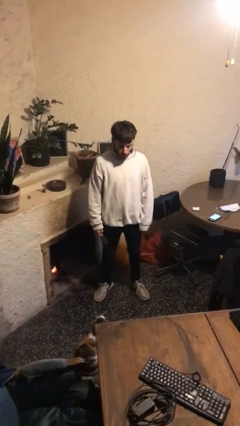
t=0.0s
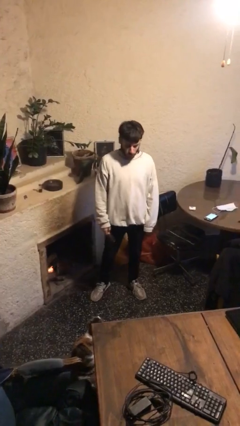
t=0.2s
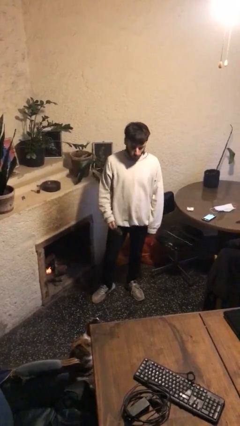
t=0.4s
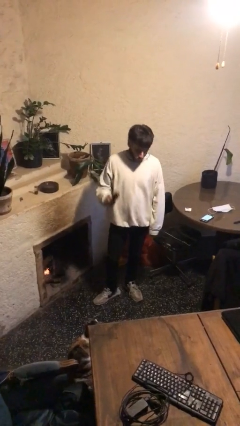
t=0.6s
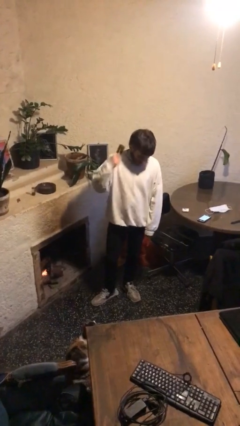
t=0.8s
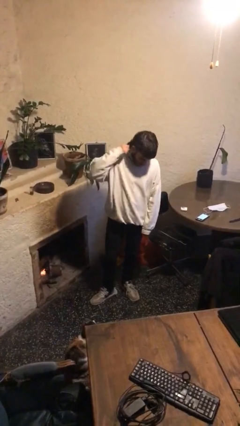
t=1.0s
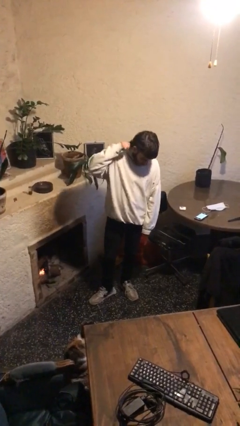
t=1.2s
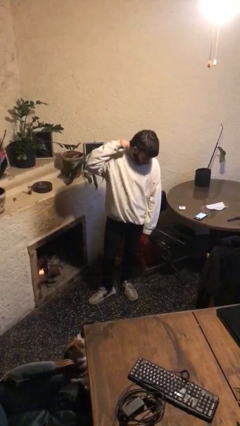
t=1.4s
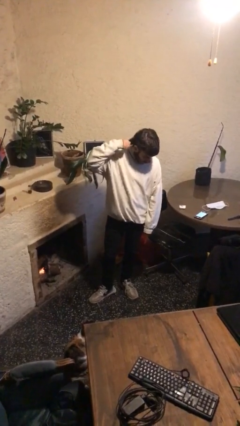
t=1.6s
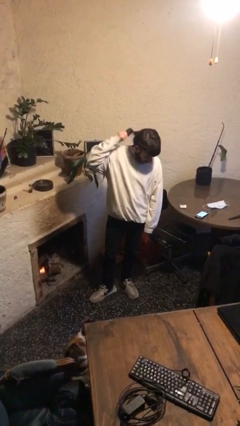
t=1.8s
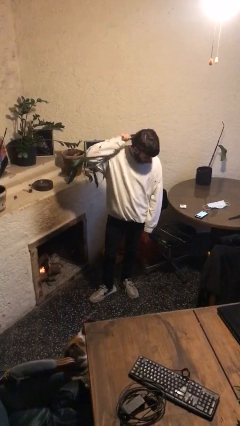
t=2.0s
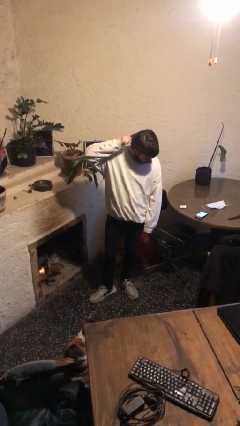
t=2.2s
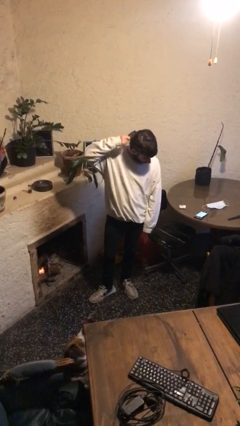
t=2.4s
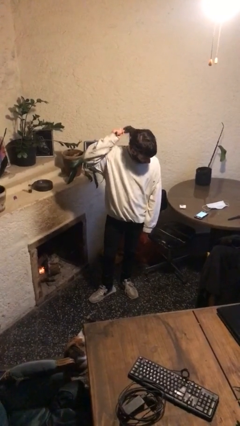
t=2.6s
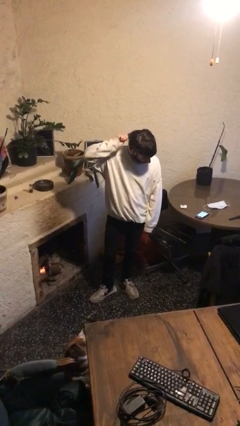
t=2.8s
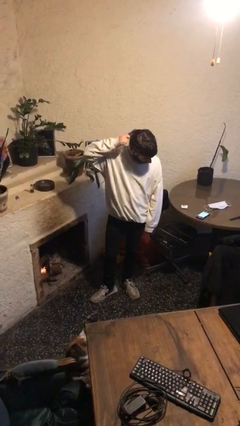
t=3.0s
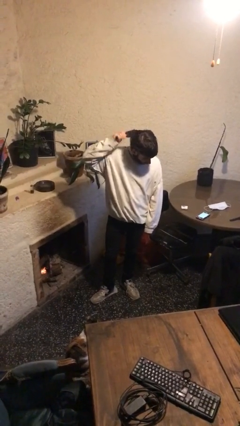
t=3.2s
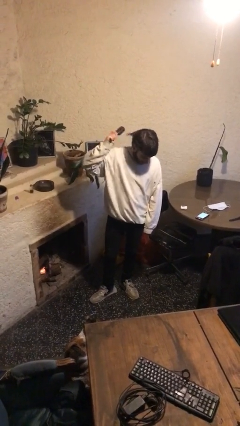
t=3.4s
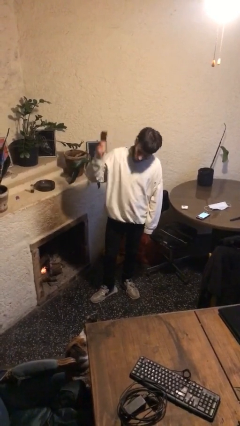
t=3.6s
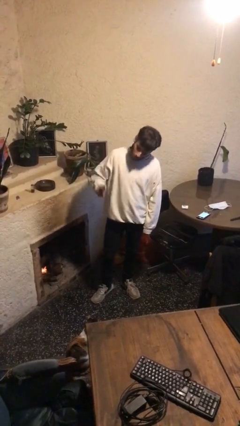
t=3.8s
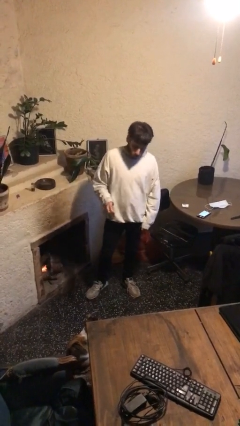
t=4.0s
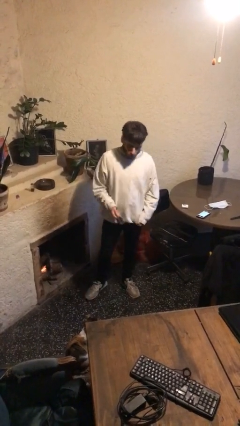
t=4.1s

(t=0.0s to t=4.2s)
person brushes hair

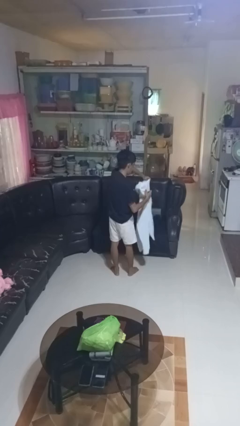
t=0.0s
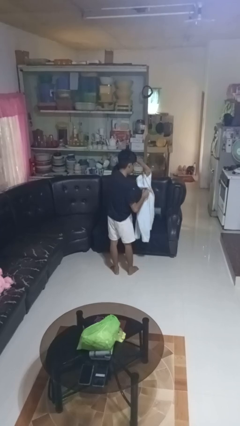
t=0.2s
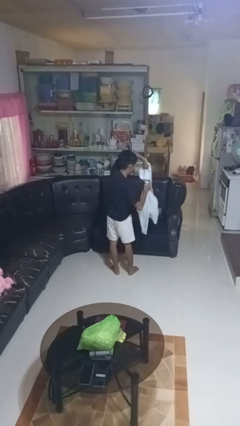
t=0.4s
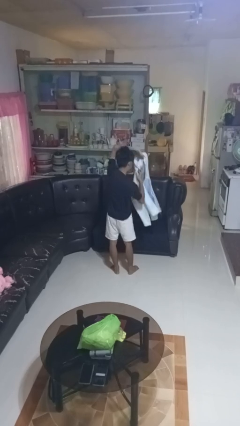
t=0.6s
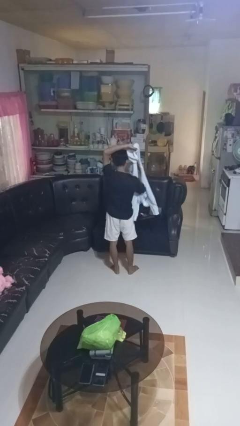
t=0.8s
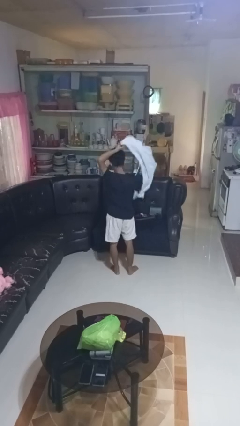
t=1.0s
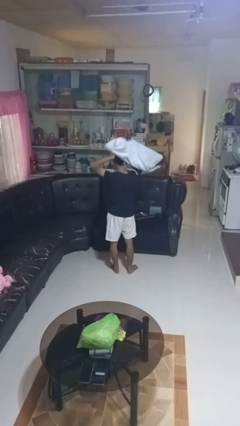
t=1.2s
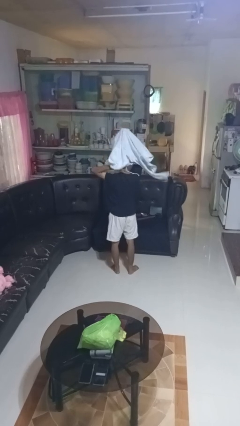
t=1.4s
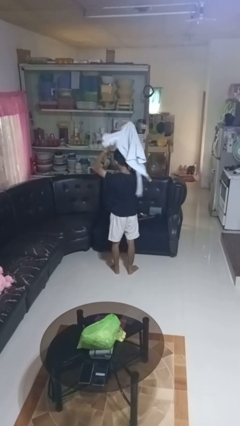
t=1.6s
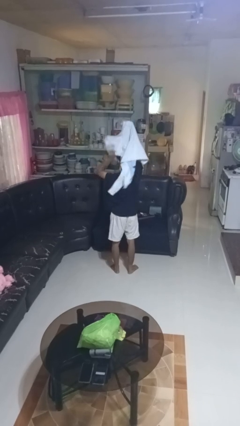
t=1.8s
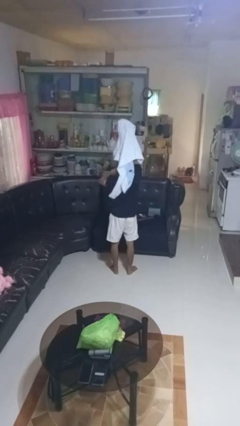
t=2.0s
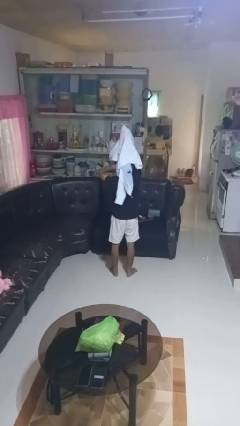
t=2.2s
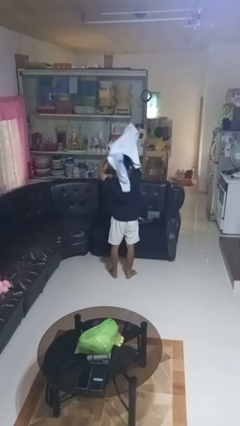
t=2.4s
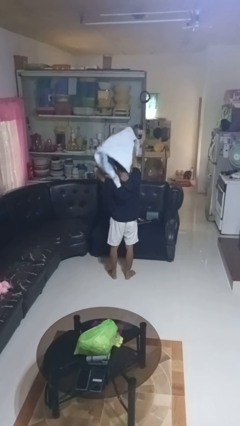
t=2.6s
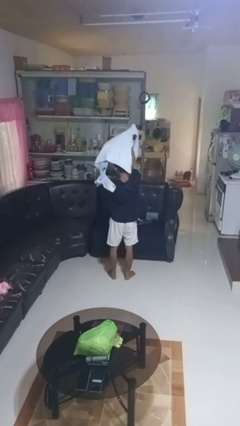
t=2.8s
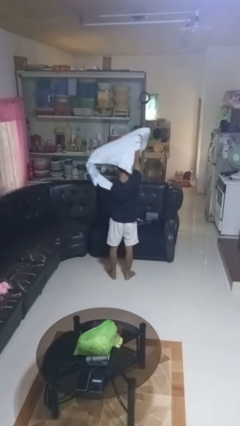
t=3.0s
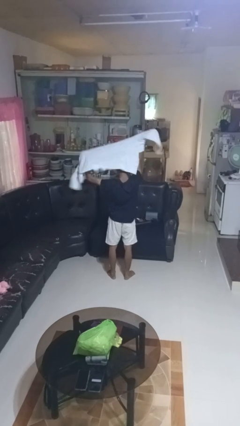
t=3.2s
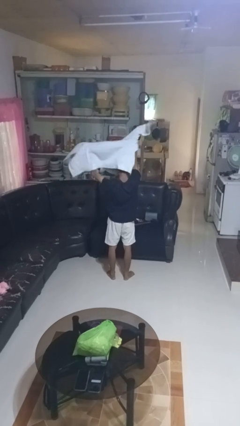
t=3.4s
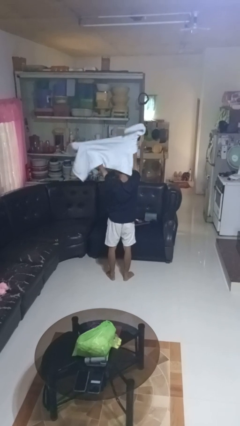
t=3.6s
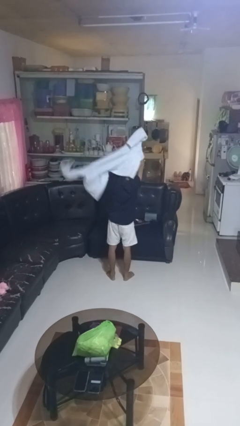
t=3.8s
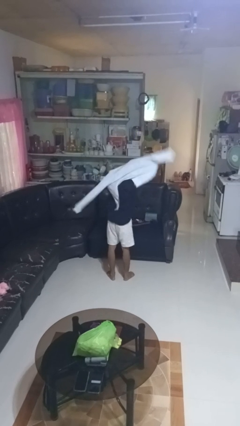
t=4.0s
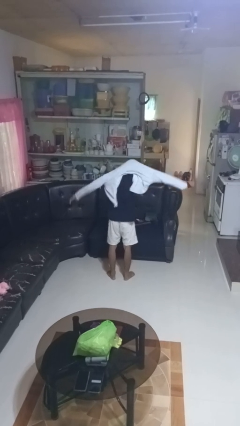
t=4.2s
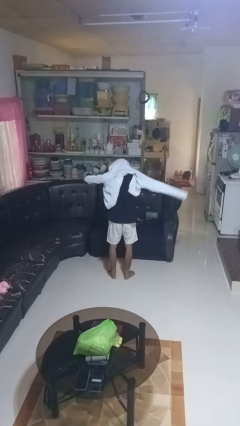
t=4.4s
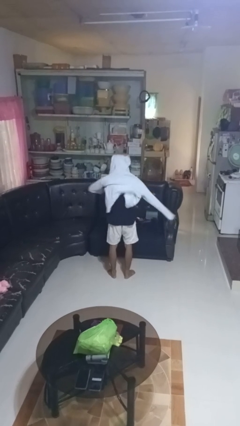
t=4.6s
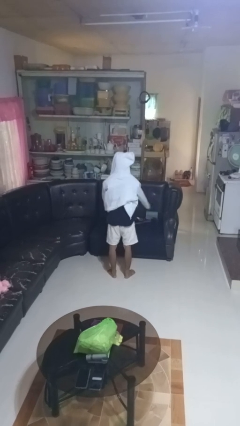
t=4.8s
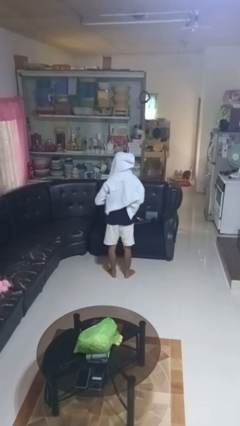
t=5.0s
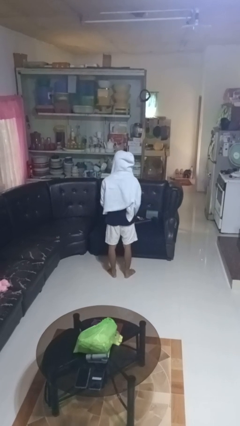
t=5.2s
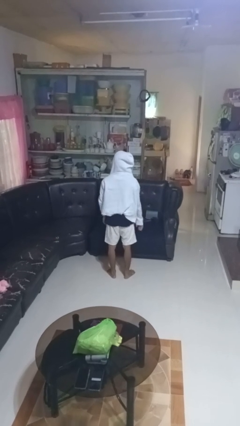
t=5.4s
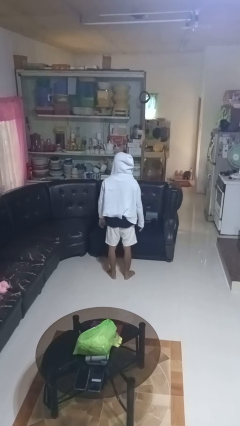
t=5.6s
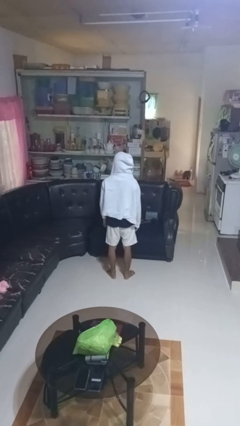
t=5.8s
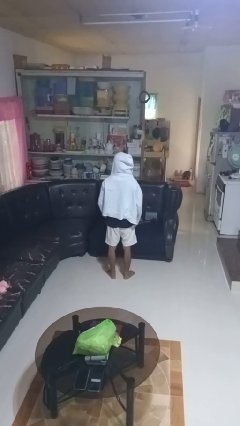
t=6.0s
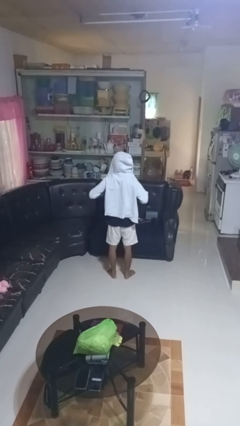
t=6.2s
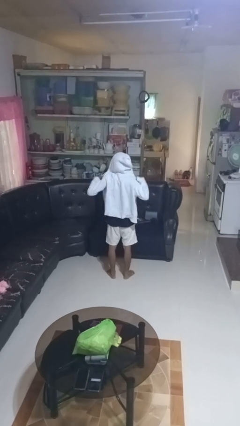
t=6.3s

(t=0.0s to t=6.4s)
person puts on hoodie

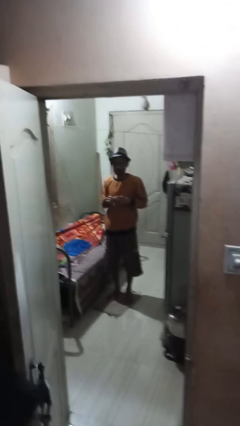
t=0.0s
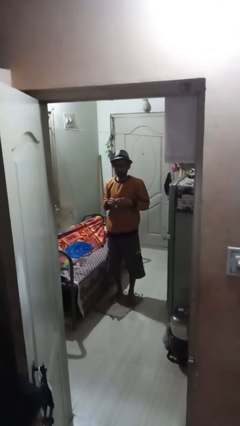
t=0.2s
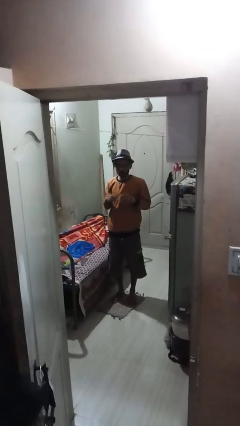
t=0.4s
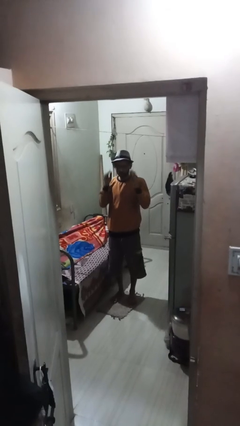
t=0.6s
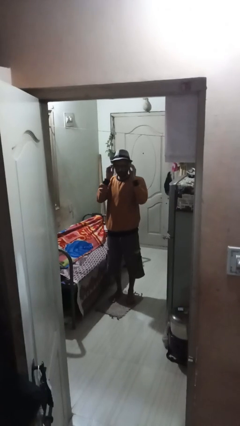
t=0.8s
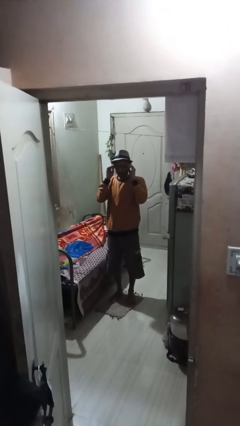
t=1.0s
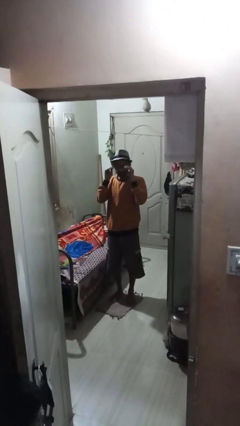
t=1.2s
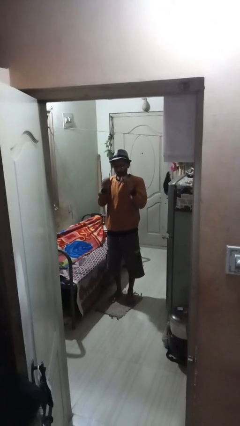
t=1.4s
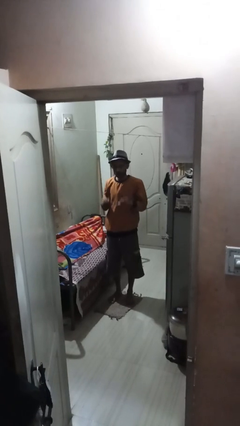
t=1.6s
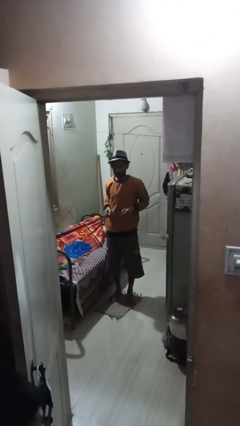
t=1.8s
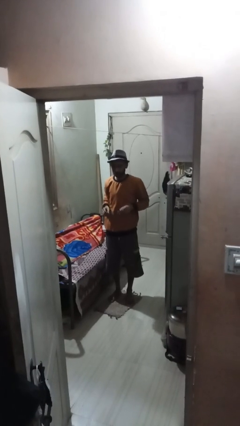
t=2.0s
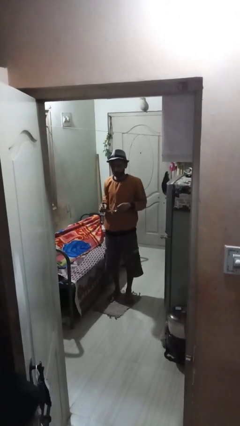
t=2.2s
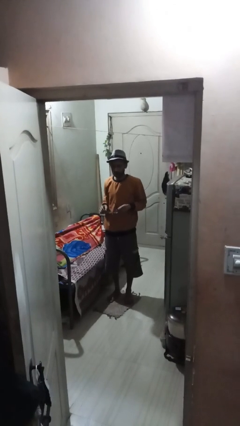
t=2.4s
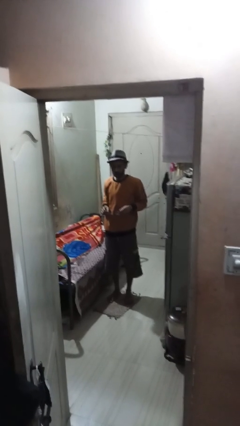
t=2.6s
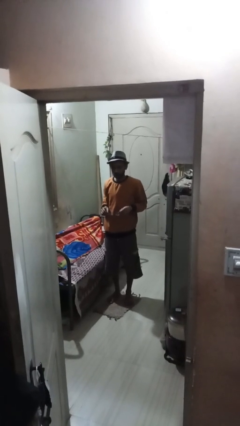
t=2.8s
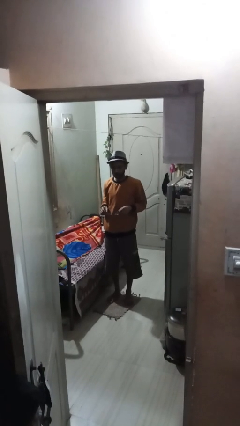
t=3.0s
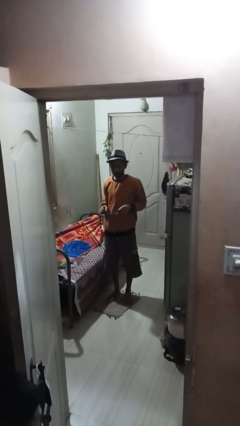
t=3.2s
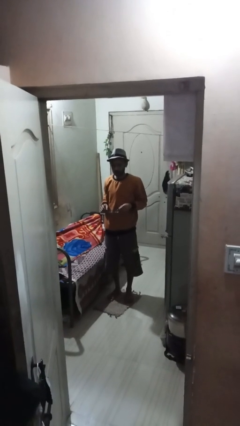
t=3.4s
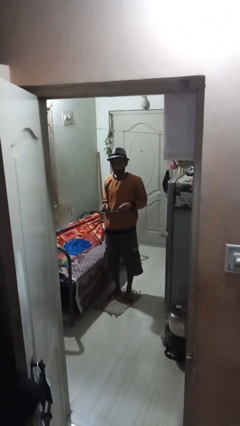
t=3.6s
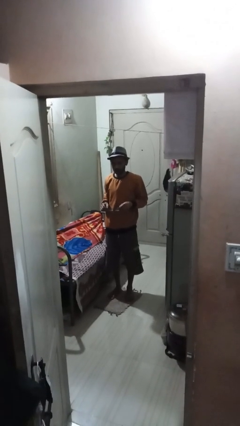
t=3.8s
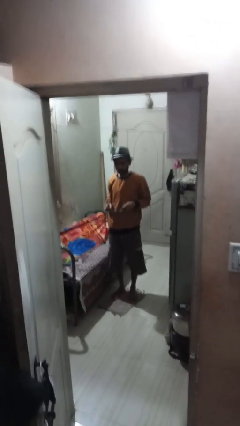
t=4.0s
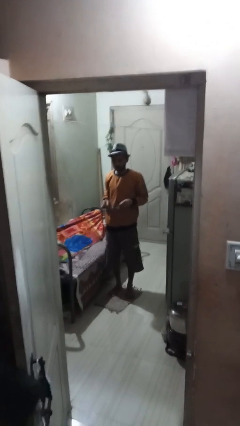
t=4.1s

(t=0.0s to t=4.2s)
person takes off glasses

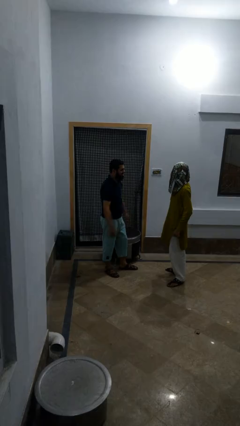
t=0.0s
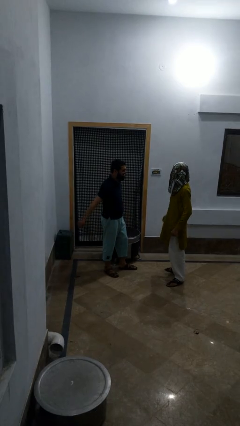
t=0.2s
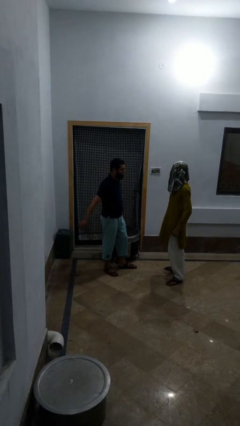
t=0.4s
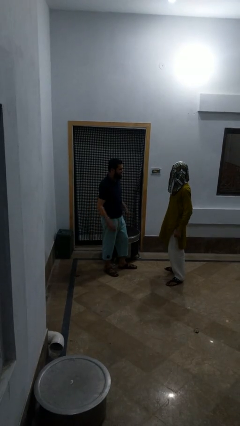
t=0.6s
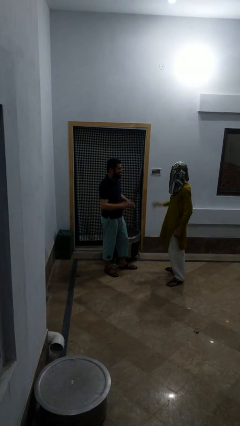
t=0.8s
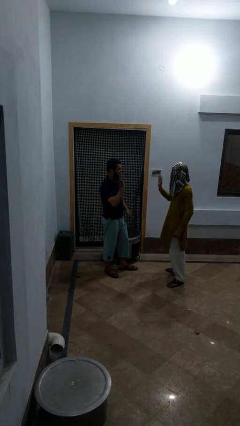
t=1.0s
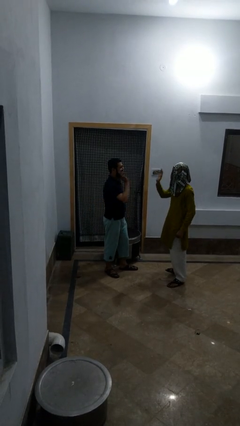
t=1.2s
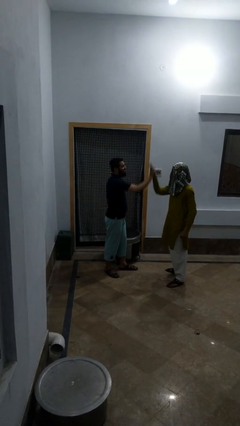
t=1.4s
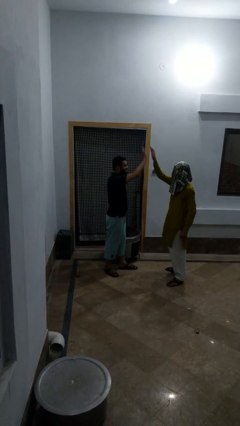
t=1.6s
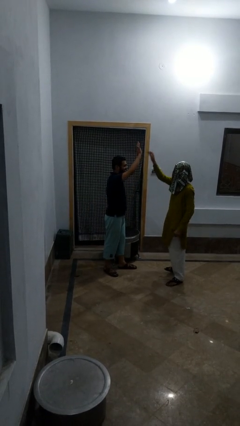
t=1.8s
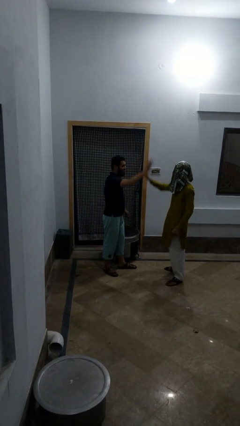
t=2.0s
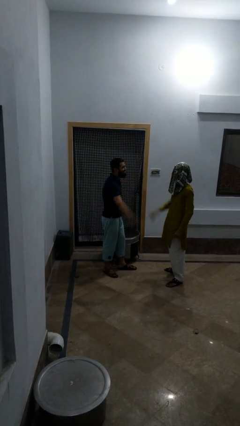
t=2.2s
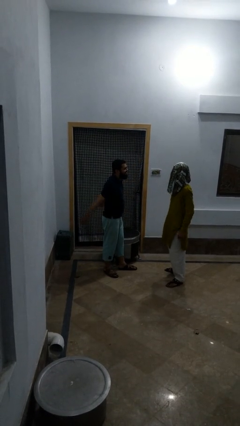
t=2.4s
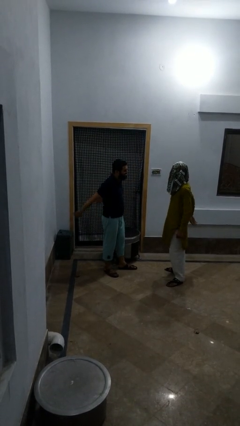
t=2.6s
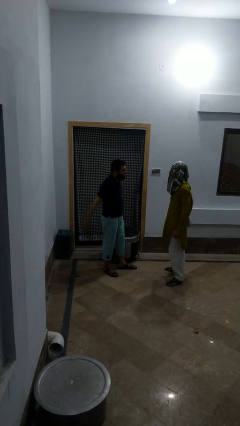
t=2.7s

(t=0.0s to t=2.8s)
person highfives hand

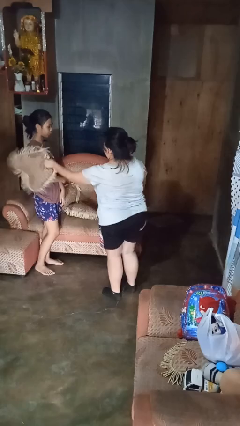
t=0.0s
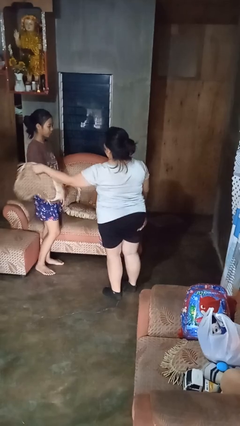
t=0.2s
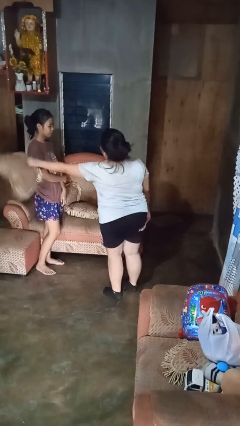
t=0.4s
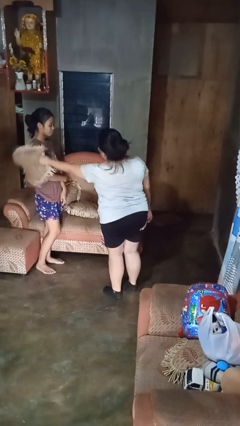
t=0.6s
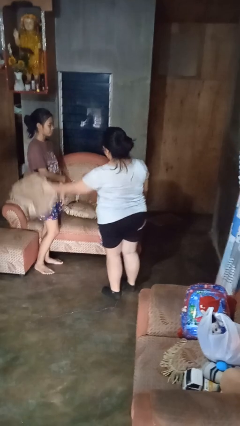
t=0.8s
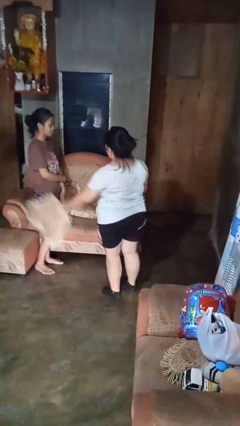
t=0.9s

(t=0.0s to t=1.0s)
person hits person with pillow
